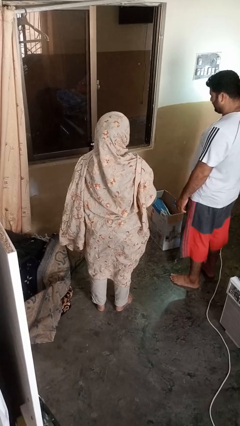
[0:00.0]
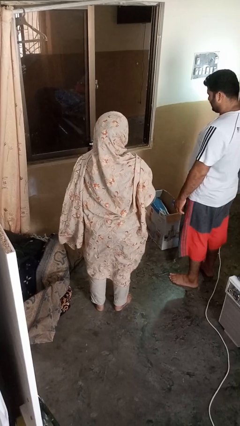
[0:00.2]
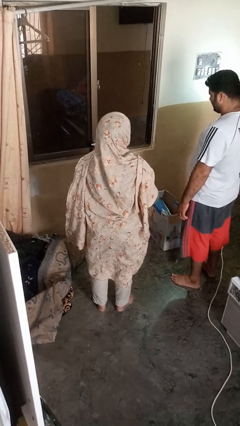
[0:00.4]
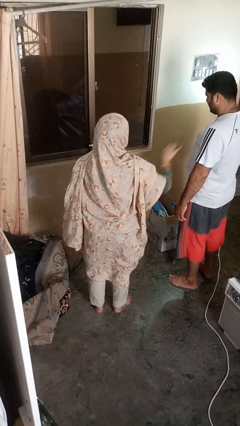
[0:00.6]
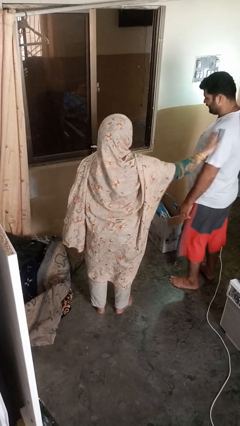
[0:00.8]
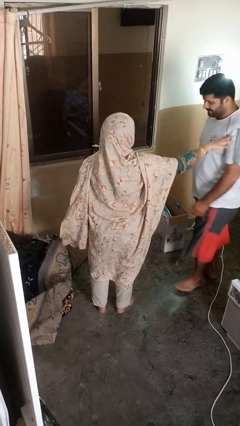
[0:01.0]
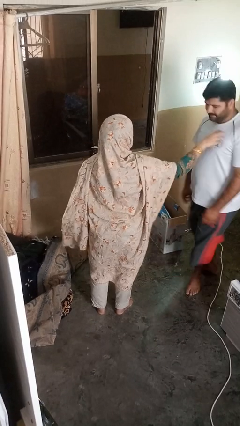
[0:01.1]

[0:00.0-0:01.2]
person grabs person by shoulder

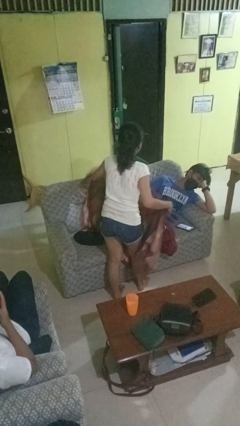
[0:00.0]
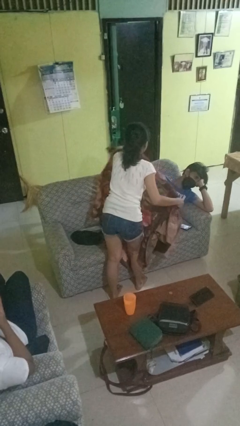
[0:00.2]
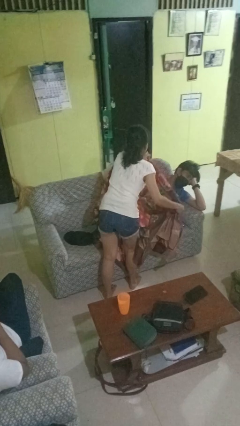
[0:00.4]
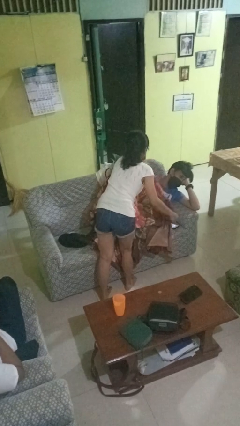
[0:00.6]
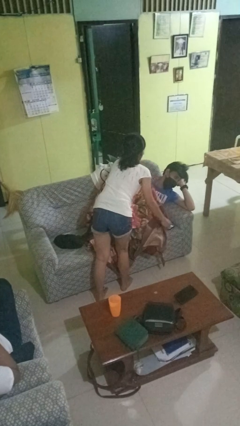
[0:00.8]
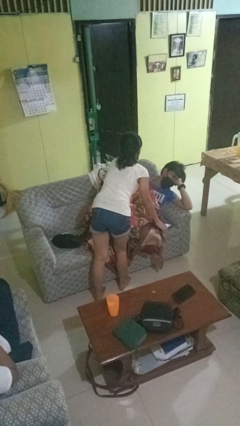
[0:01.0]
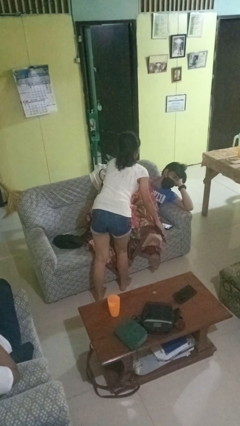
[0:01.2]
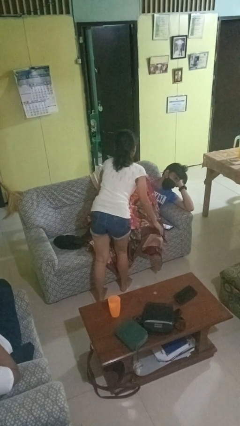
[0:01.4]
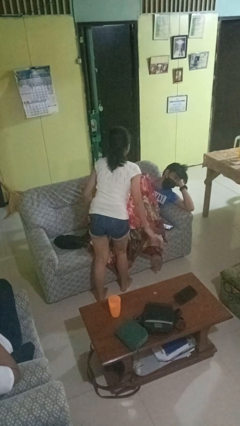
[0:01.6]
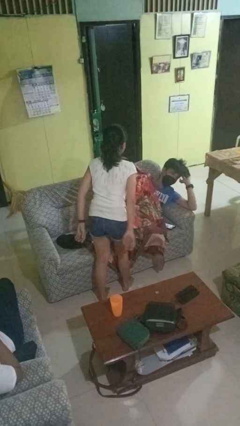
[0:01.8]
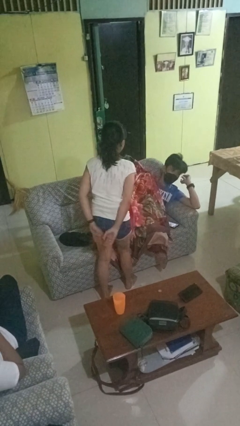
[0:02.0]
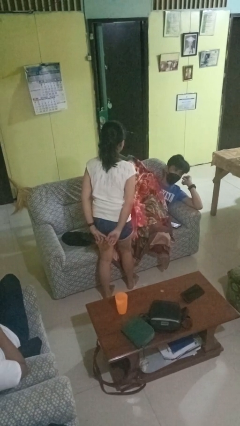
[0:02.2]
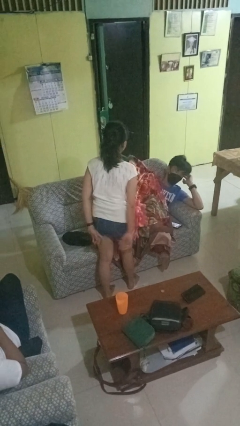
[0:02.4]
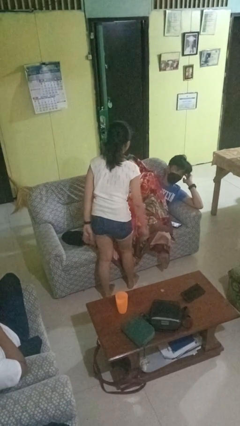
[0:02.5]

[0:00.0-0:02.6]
person covers friend with blanket

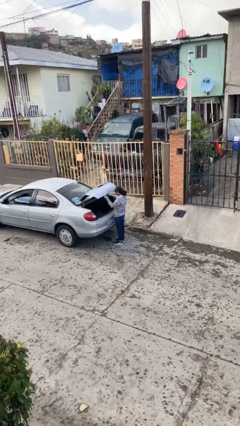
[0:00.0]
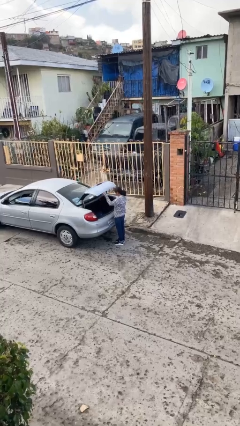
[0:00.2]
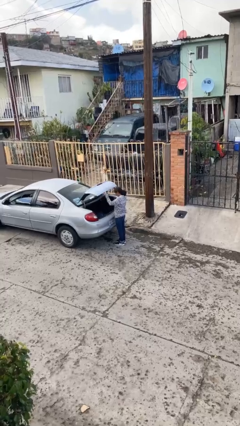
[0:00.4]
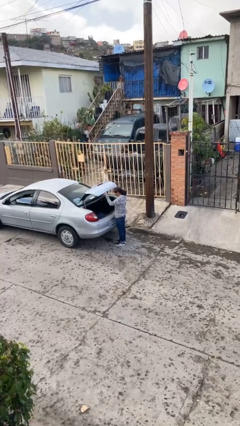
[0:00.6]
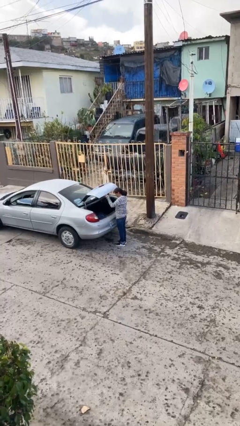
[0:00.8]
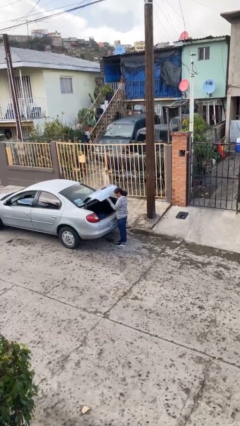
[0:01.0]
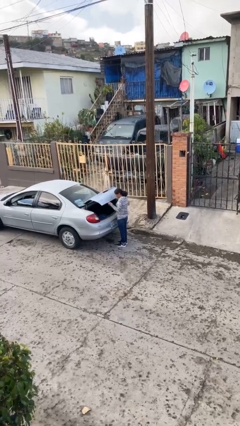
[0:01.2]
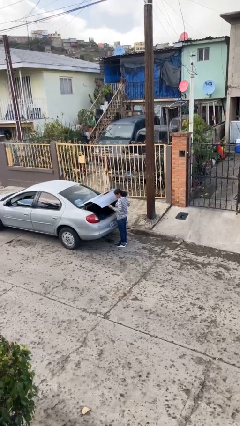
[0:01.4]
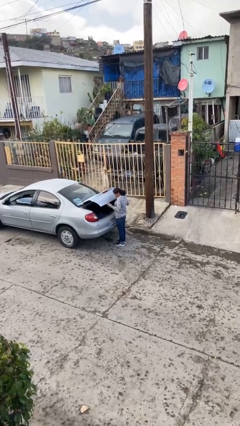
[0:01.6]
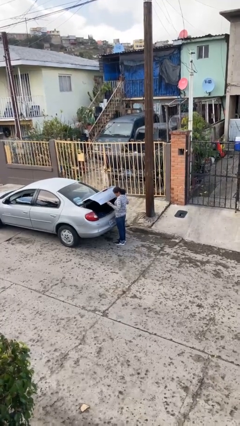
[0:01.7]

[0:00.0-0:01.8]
person opens car trunk

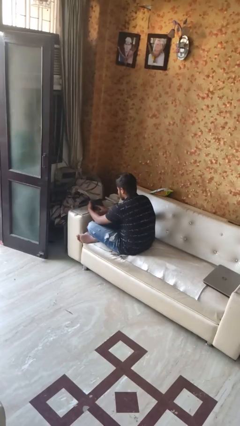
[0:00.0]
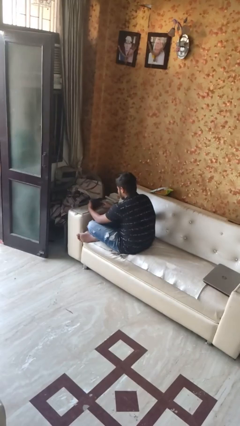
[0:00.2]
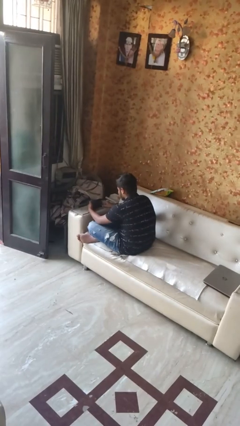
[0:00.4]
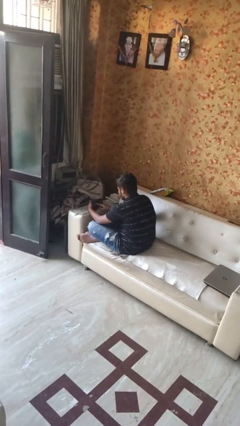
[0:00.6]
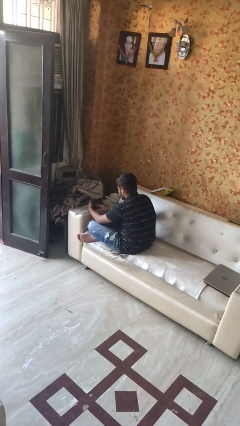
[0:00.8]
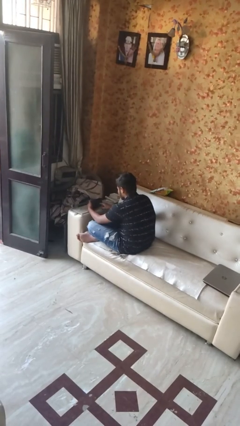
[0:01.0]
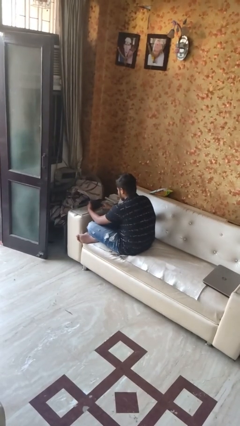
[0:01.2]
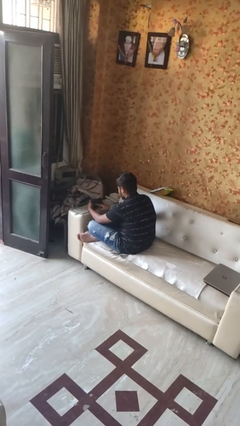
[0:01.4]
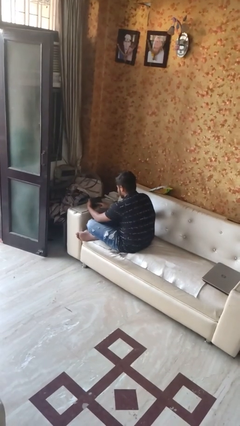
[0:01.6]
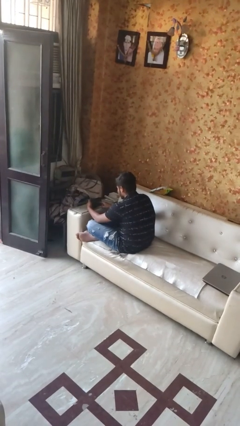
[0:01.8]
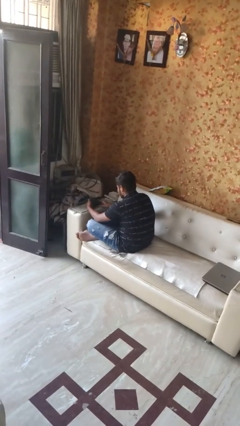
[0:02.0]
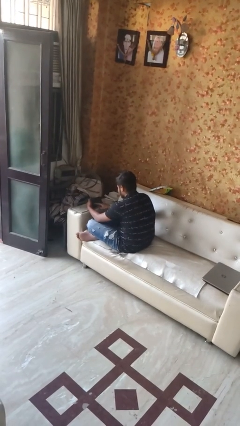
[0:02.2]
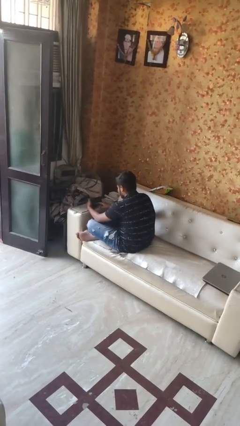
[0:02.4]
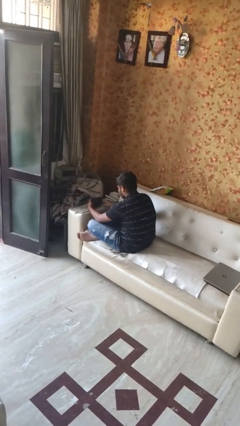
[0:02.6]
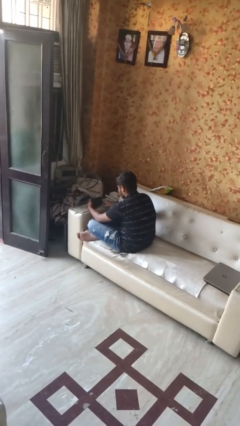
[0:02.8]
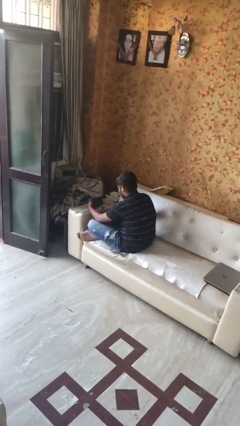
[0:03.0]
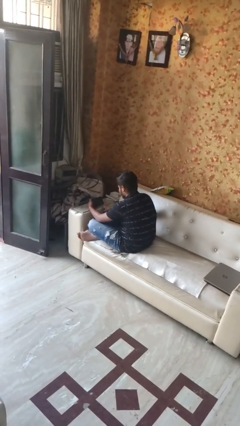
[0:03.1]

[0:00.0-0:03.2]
person interacts with tablet

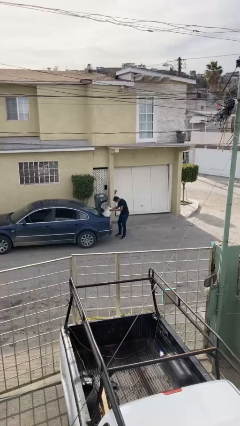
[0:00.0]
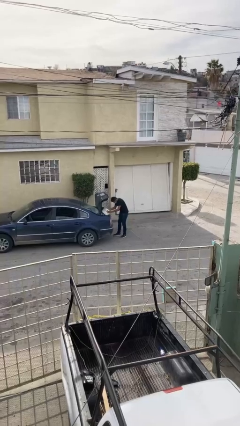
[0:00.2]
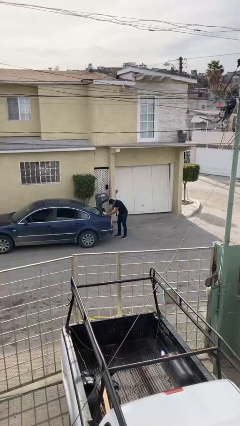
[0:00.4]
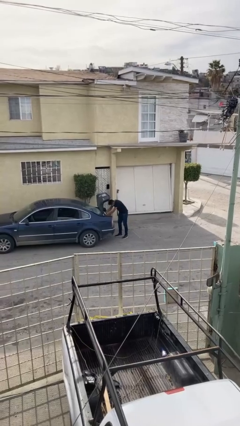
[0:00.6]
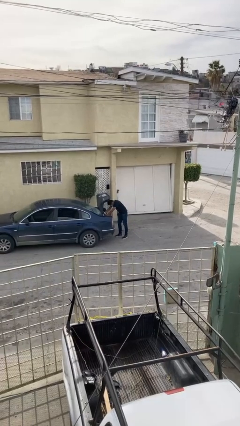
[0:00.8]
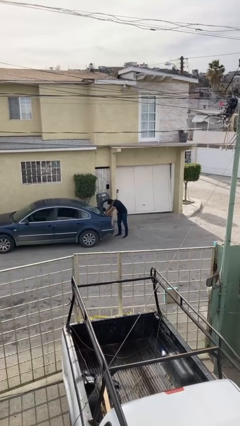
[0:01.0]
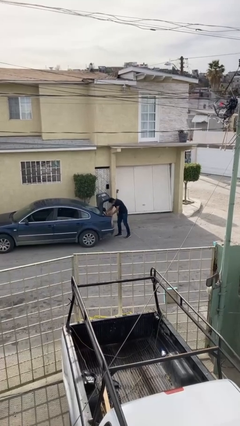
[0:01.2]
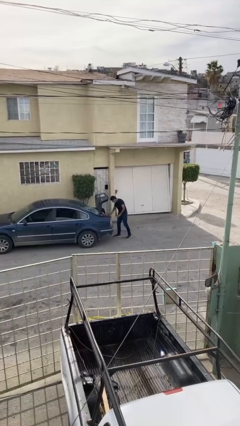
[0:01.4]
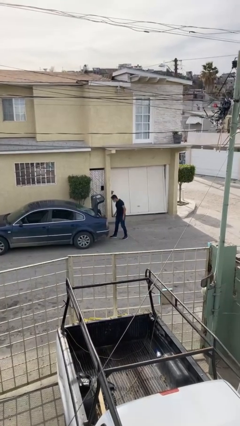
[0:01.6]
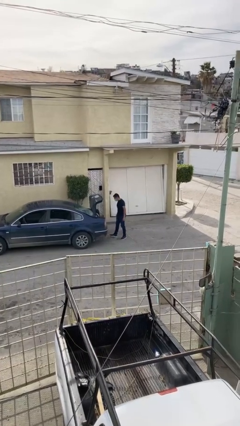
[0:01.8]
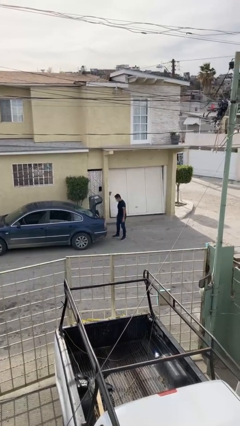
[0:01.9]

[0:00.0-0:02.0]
person loads car

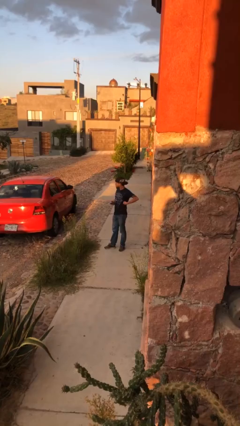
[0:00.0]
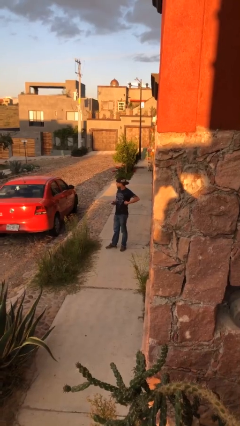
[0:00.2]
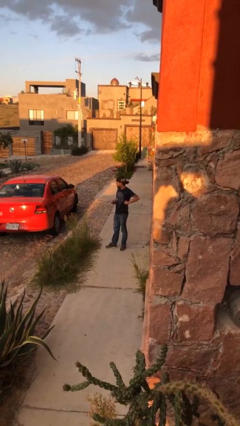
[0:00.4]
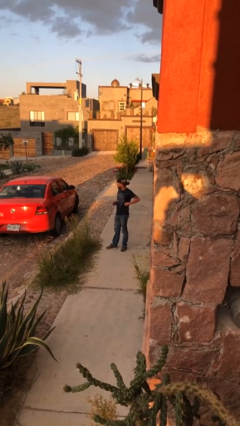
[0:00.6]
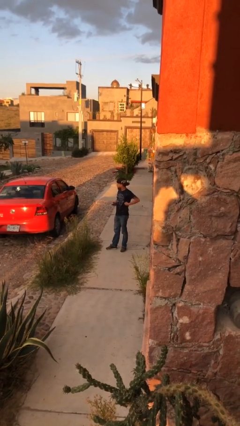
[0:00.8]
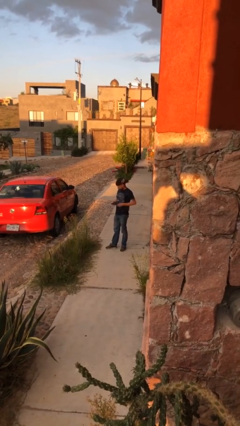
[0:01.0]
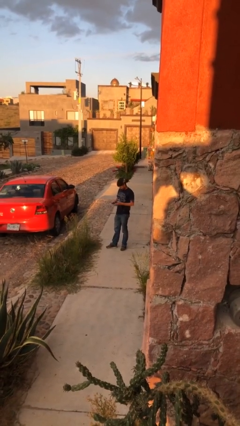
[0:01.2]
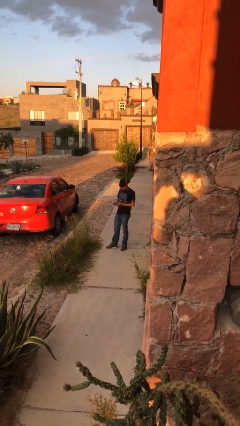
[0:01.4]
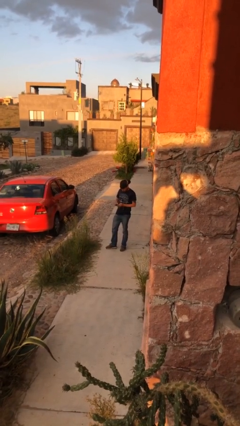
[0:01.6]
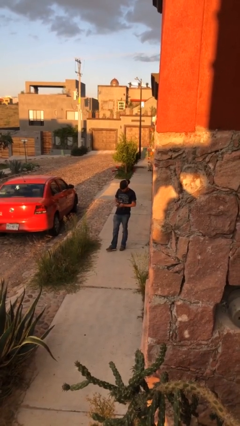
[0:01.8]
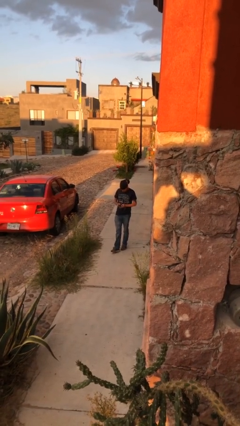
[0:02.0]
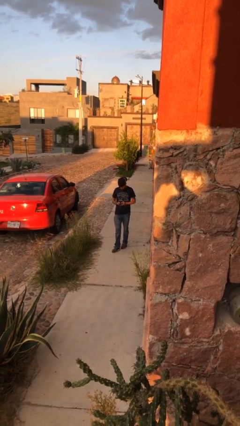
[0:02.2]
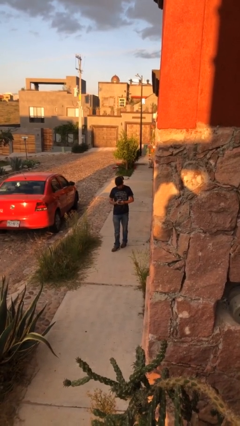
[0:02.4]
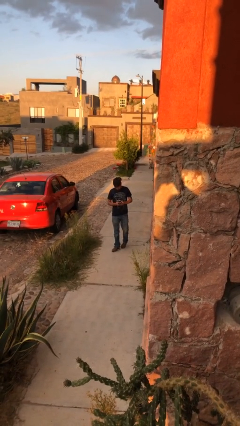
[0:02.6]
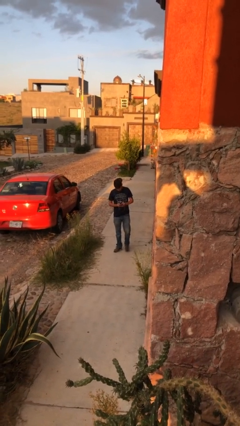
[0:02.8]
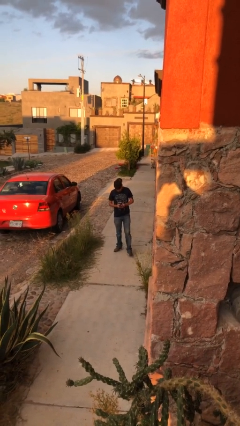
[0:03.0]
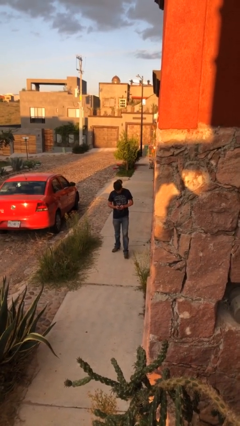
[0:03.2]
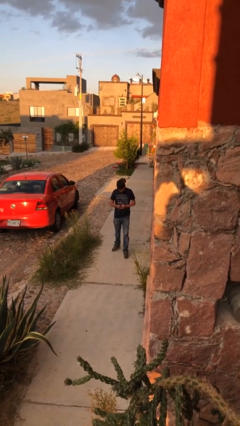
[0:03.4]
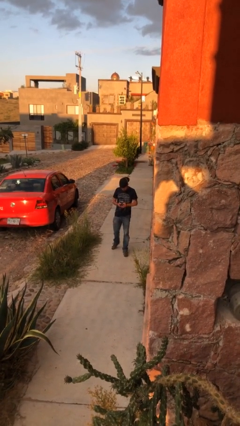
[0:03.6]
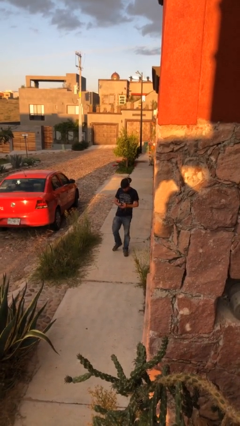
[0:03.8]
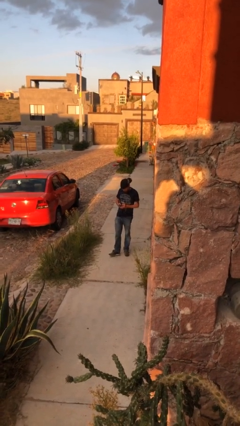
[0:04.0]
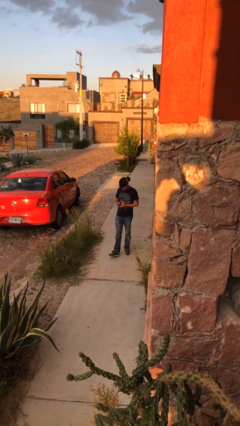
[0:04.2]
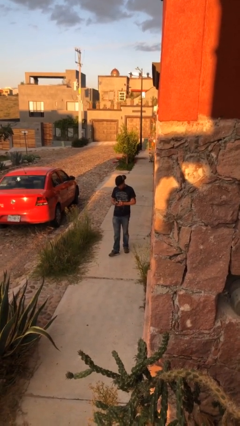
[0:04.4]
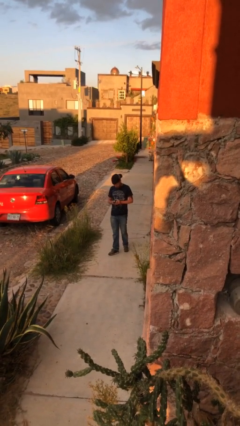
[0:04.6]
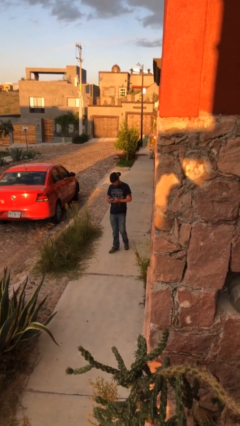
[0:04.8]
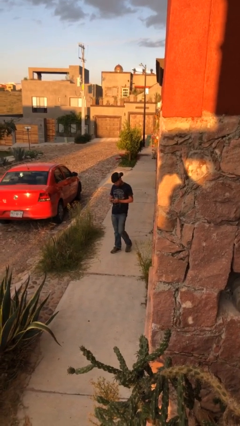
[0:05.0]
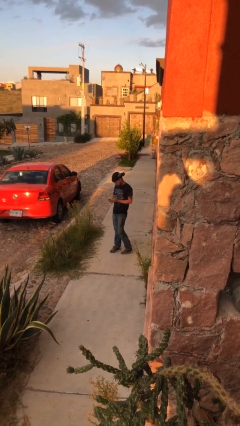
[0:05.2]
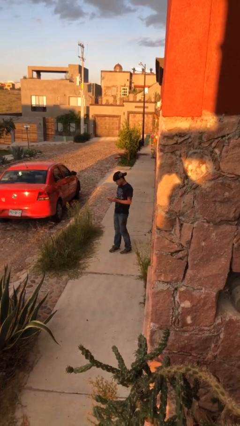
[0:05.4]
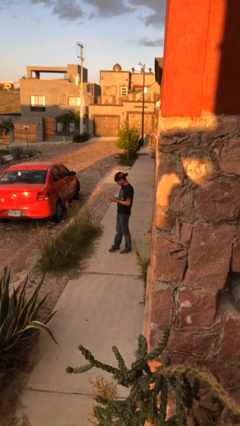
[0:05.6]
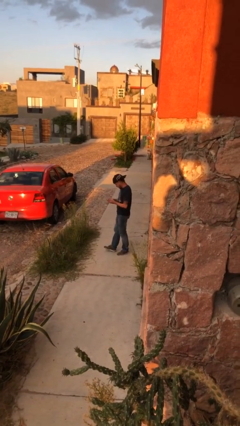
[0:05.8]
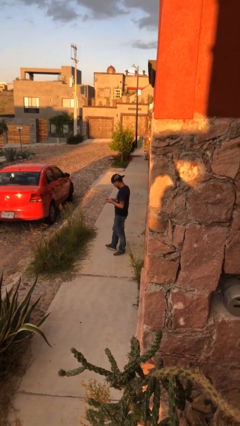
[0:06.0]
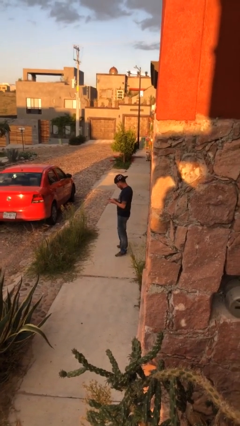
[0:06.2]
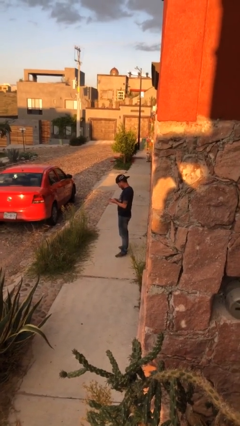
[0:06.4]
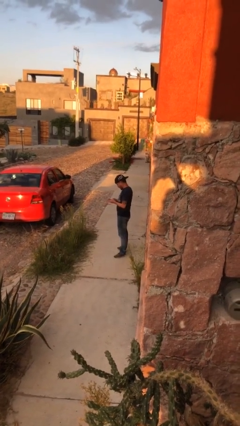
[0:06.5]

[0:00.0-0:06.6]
person texts on phone

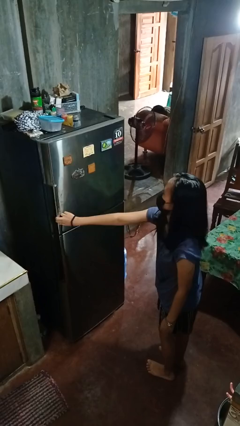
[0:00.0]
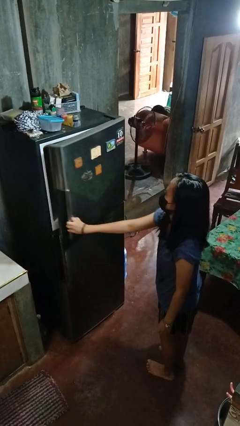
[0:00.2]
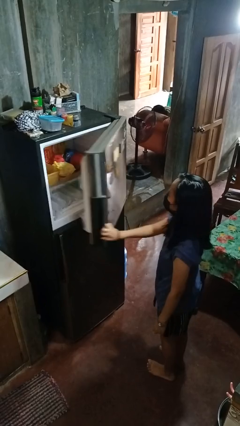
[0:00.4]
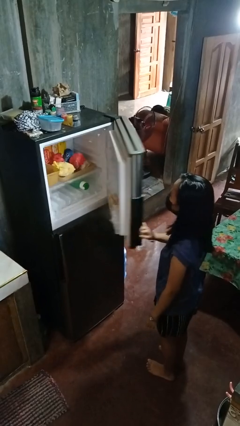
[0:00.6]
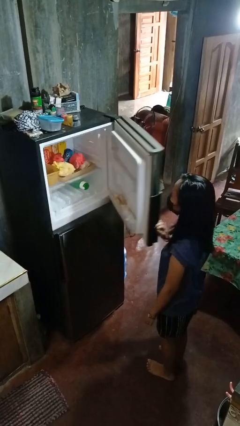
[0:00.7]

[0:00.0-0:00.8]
person opens refrigerator
